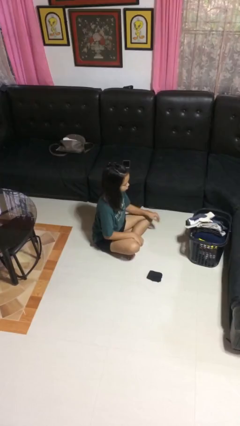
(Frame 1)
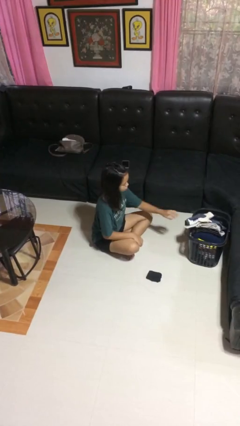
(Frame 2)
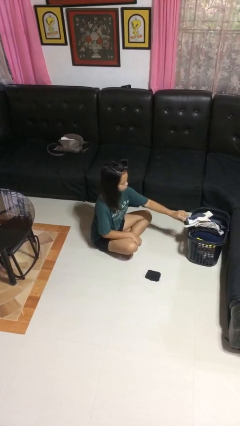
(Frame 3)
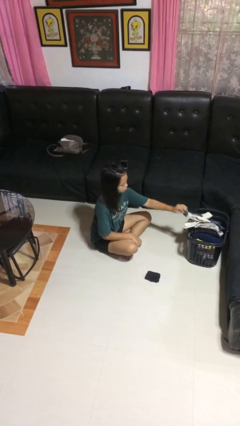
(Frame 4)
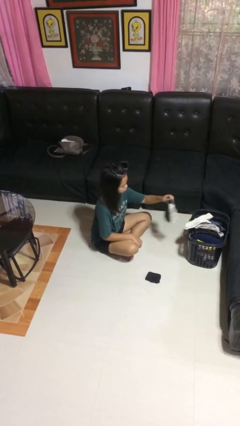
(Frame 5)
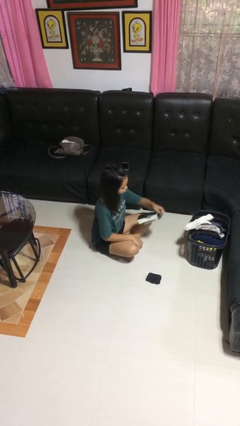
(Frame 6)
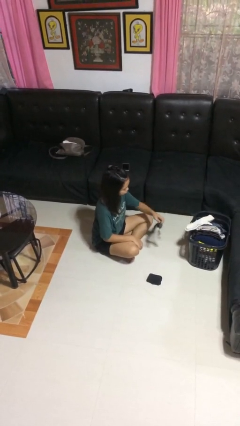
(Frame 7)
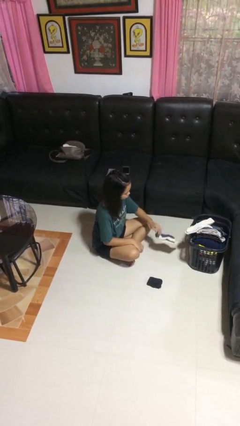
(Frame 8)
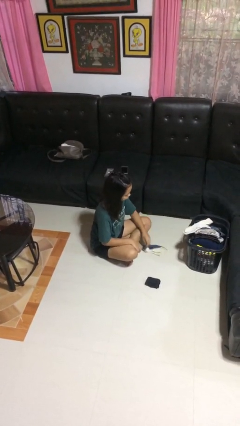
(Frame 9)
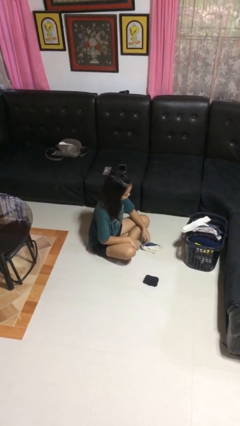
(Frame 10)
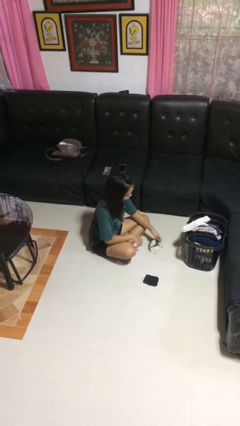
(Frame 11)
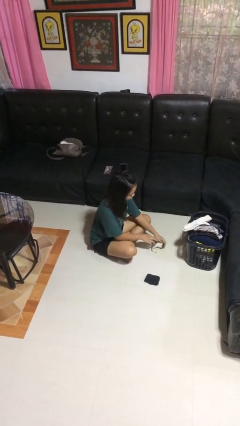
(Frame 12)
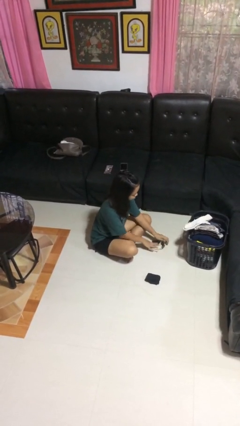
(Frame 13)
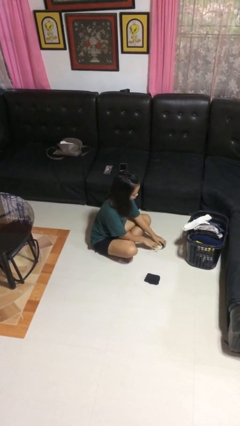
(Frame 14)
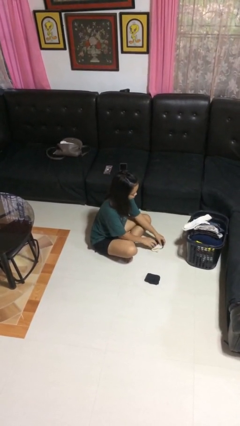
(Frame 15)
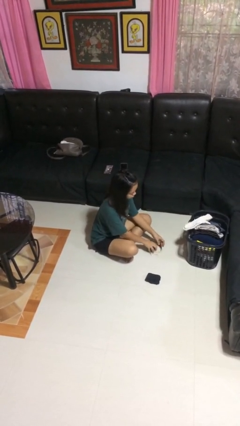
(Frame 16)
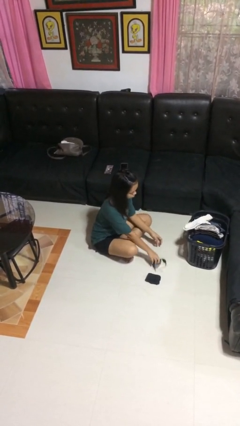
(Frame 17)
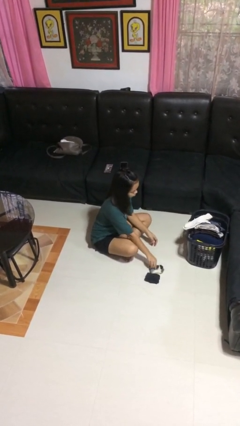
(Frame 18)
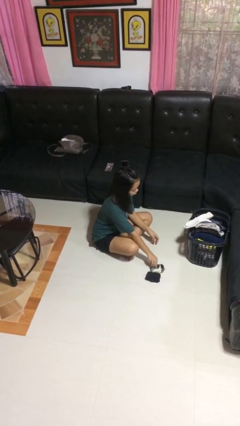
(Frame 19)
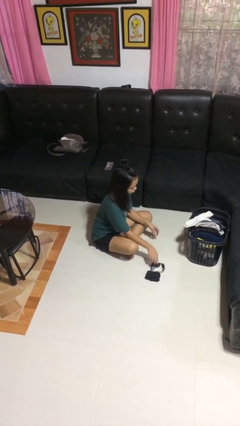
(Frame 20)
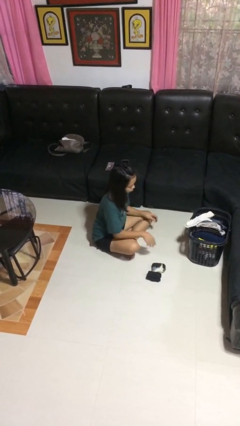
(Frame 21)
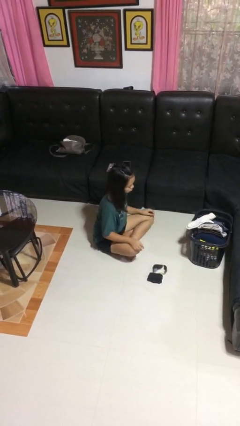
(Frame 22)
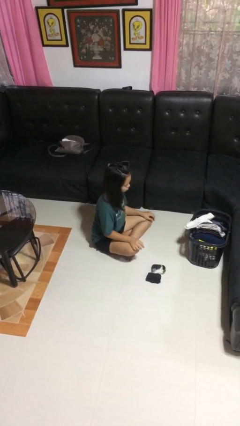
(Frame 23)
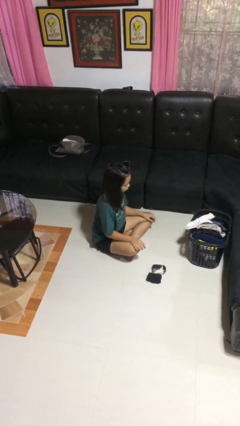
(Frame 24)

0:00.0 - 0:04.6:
person folds socks

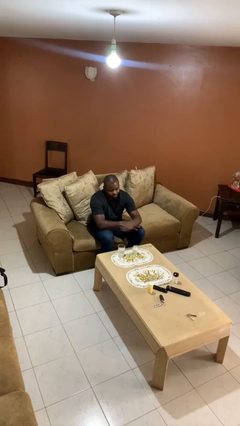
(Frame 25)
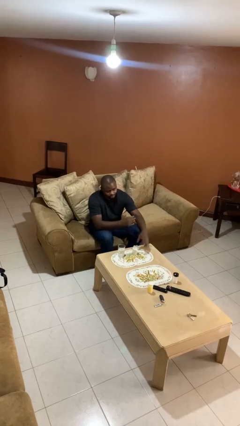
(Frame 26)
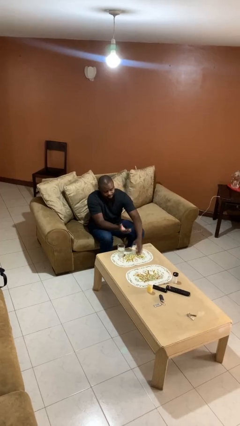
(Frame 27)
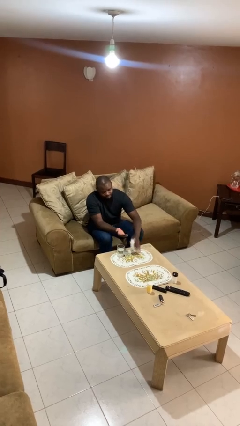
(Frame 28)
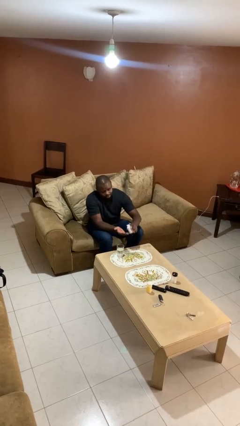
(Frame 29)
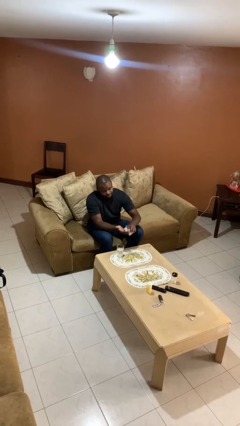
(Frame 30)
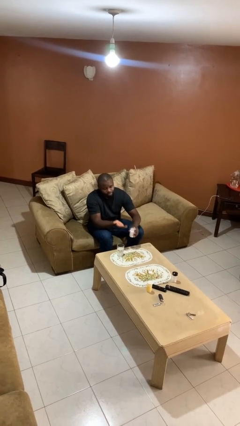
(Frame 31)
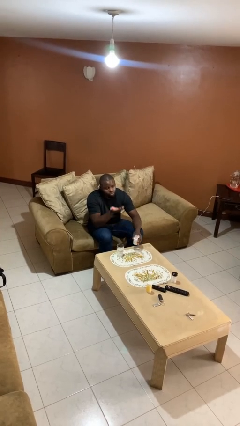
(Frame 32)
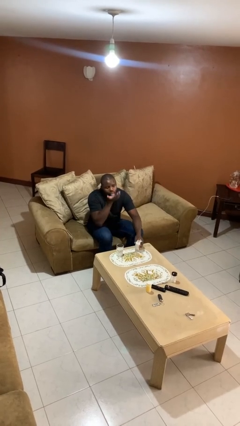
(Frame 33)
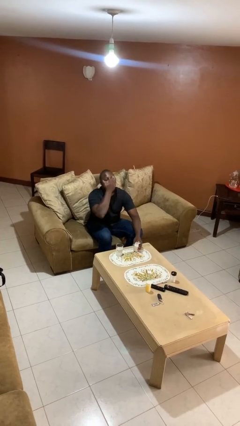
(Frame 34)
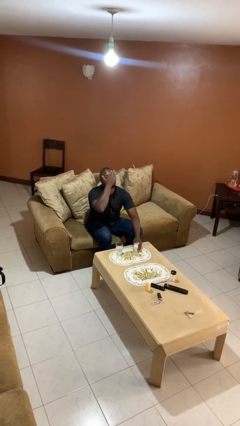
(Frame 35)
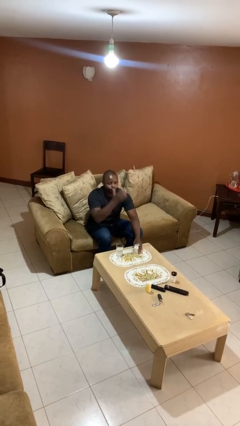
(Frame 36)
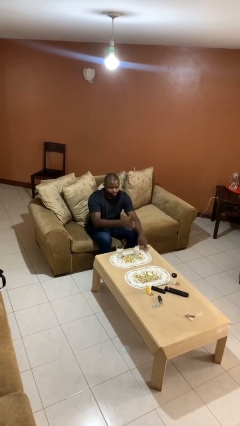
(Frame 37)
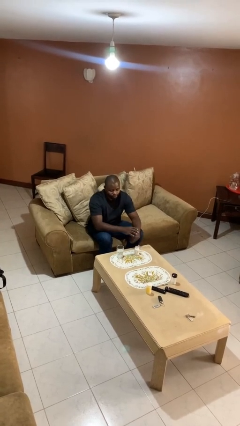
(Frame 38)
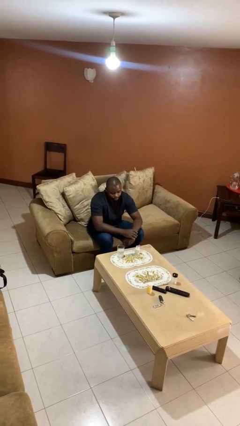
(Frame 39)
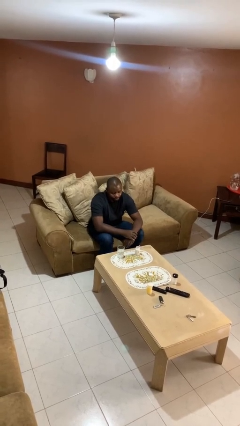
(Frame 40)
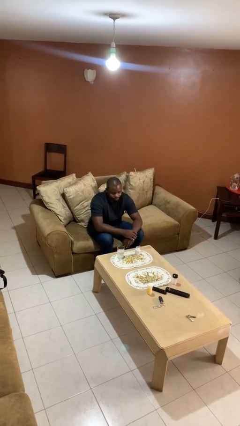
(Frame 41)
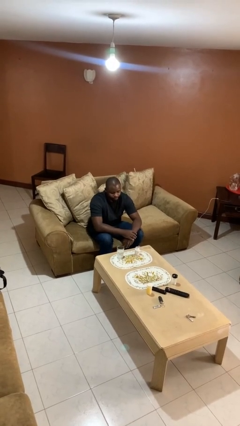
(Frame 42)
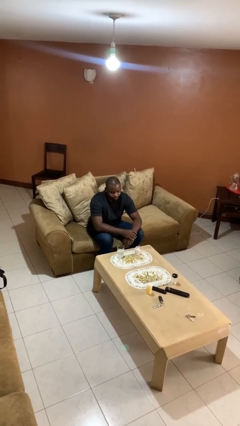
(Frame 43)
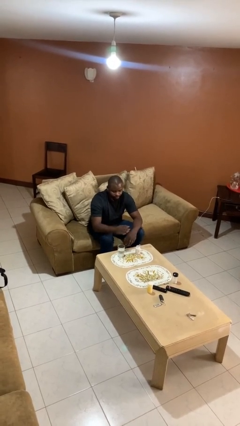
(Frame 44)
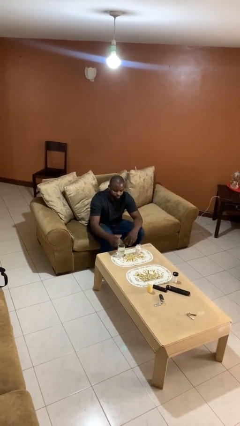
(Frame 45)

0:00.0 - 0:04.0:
person takes medicine pills

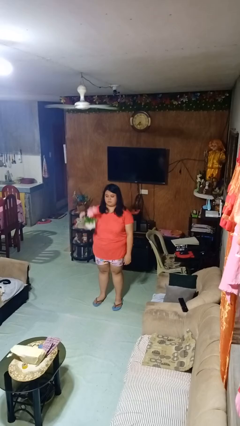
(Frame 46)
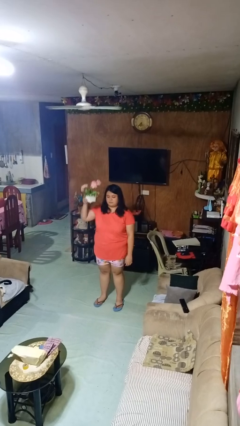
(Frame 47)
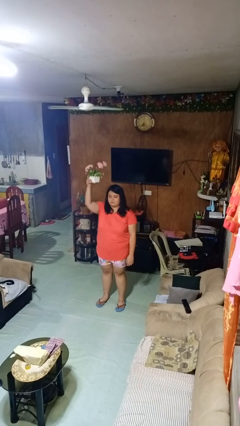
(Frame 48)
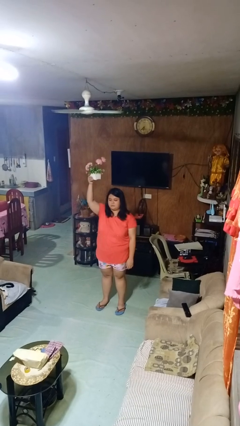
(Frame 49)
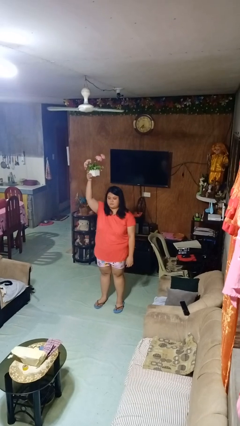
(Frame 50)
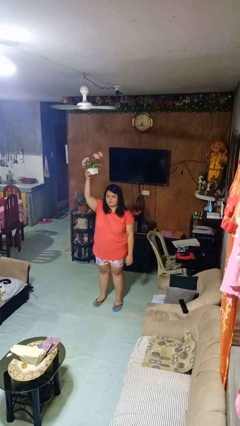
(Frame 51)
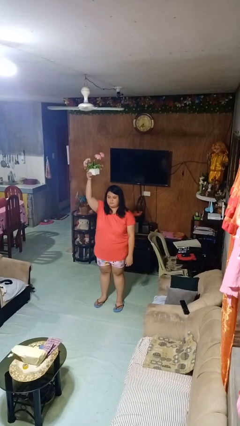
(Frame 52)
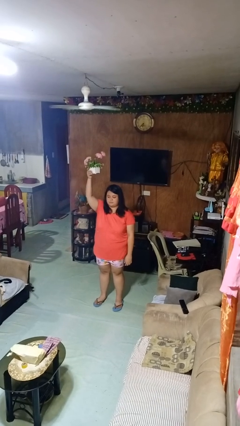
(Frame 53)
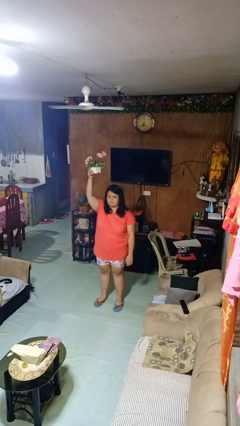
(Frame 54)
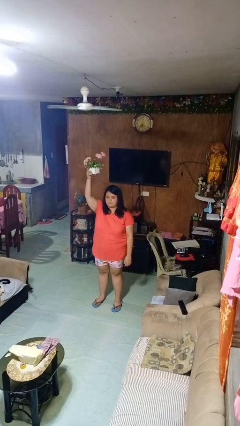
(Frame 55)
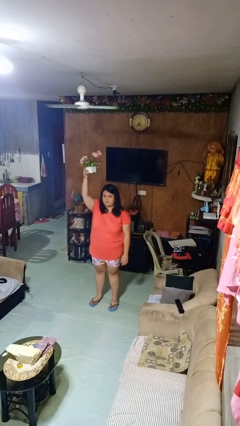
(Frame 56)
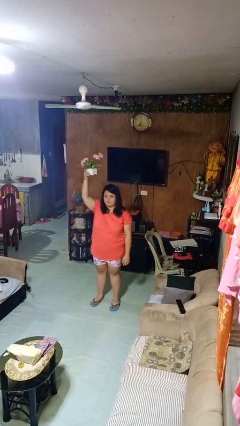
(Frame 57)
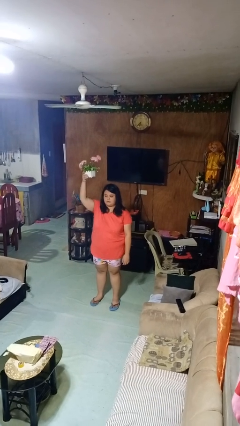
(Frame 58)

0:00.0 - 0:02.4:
person holds object above head

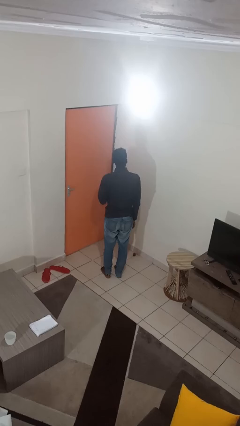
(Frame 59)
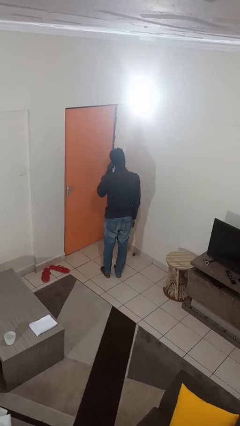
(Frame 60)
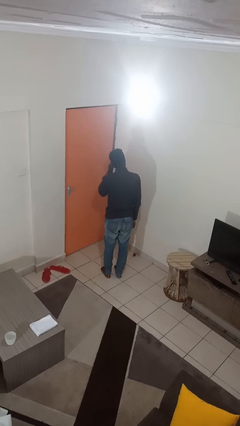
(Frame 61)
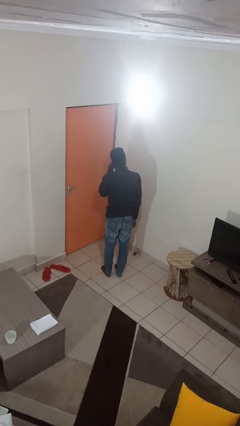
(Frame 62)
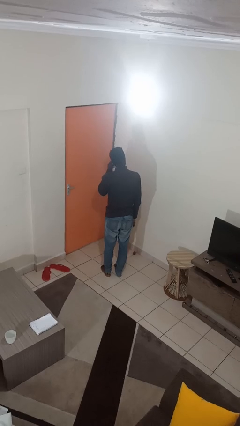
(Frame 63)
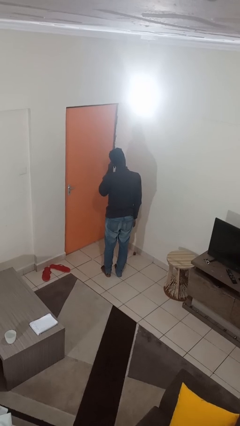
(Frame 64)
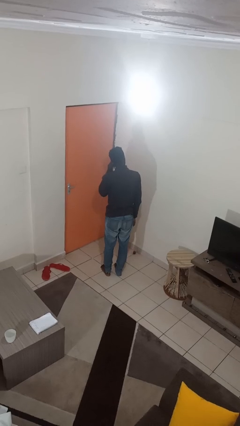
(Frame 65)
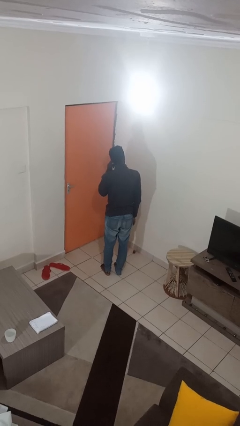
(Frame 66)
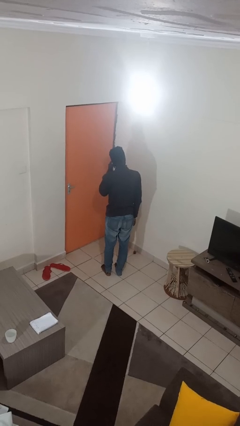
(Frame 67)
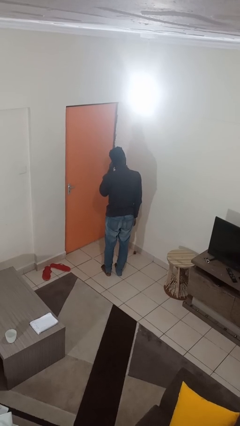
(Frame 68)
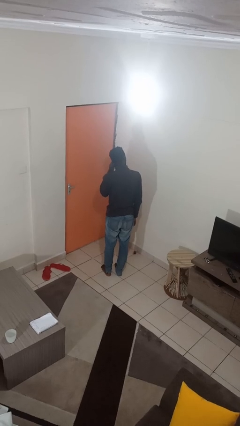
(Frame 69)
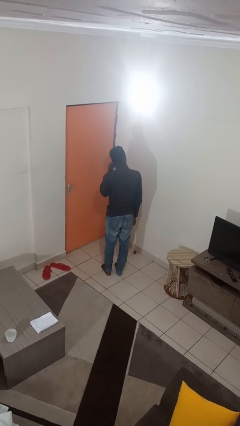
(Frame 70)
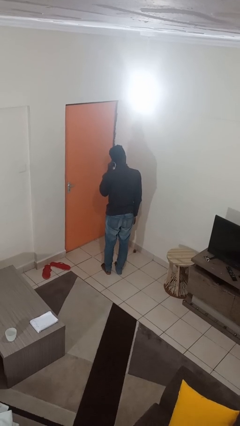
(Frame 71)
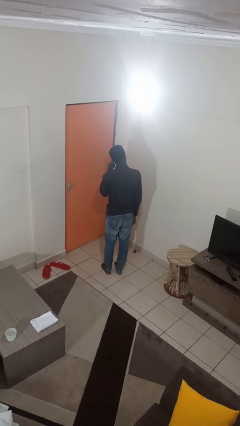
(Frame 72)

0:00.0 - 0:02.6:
person touches earlobe

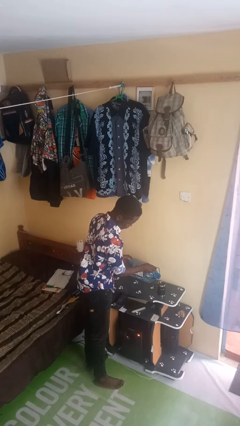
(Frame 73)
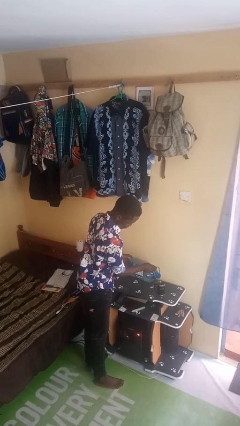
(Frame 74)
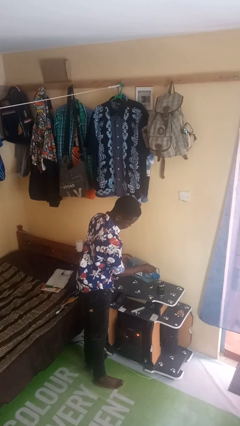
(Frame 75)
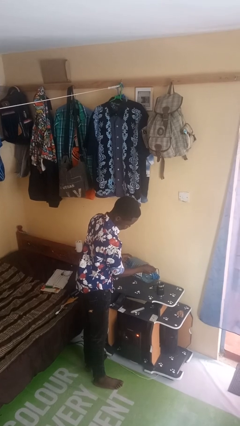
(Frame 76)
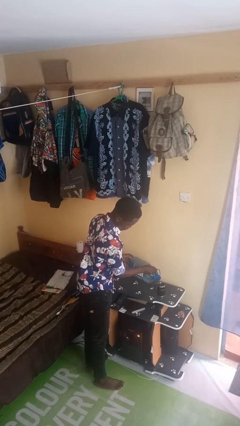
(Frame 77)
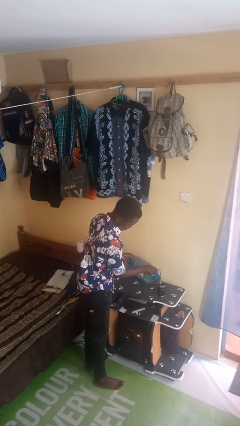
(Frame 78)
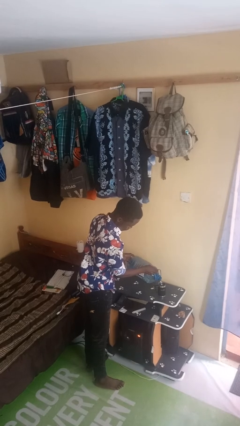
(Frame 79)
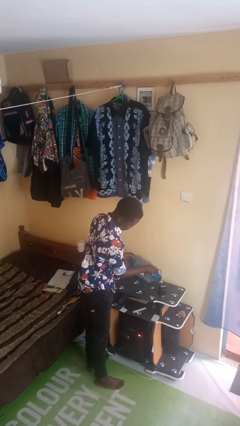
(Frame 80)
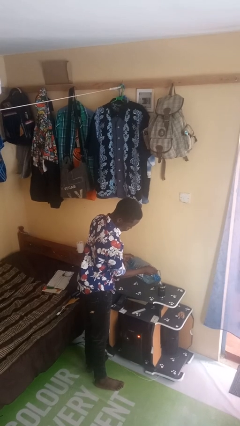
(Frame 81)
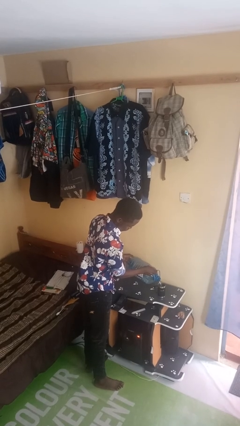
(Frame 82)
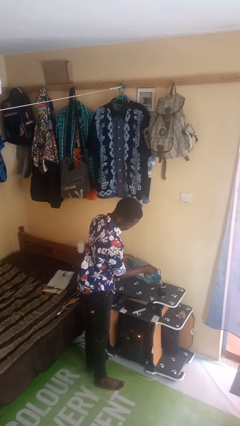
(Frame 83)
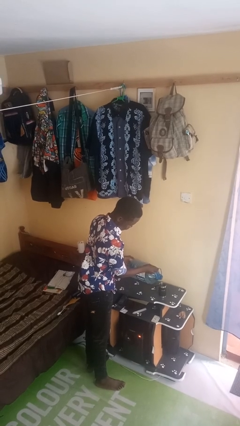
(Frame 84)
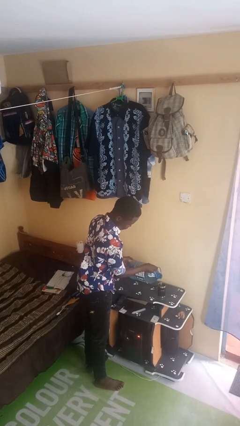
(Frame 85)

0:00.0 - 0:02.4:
person pours liquid into cup

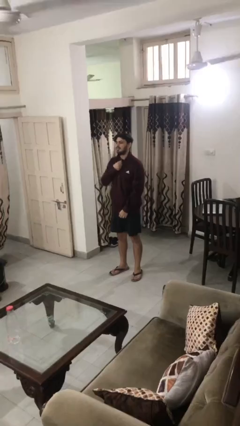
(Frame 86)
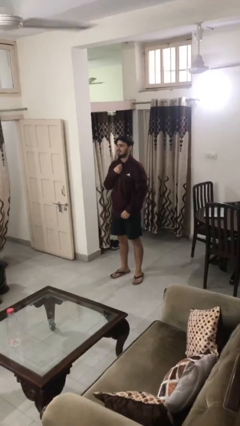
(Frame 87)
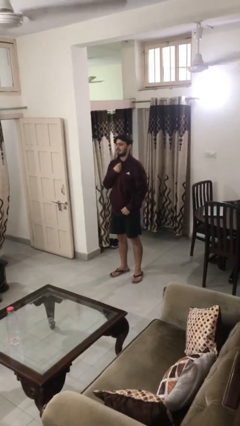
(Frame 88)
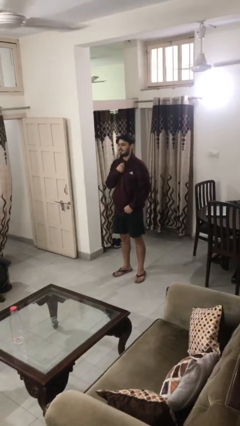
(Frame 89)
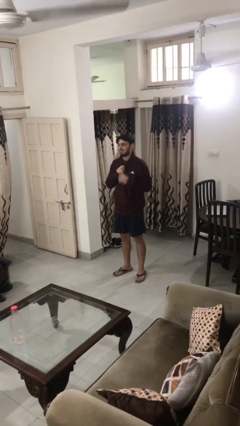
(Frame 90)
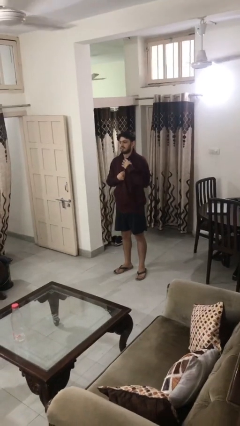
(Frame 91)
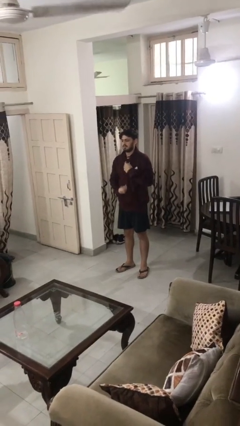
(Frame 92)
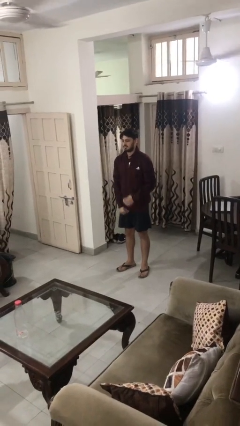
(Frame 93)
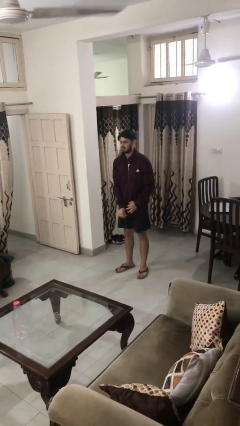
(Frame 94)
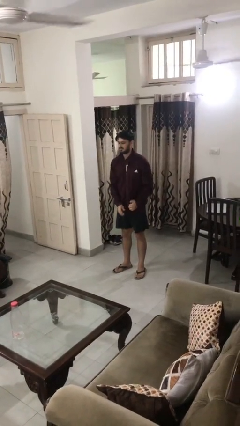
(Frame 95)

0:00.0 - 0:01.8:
person unzips jacket
